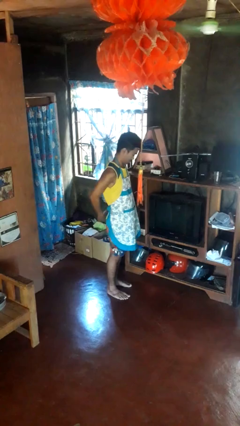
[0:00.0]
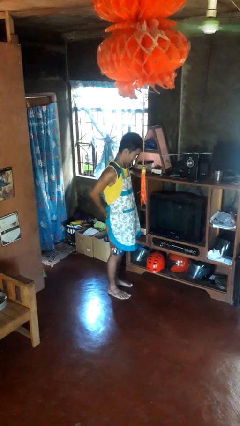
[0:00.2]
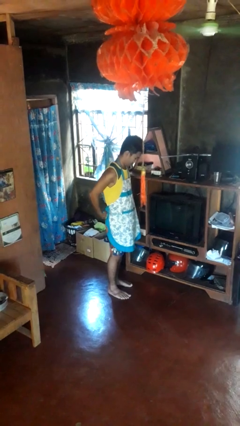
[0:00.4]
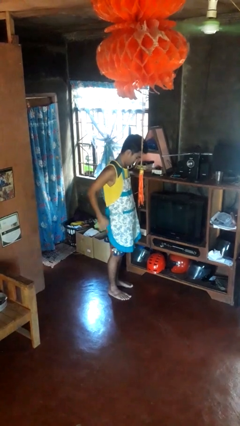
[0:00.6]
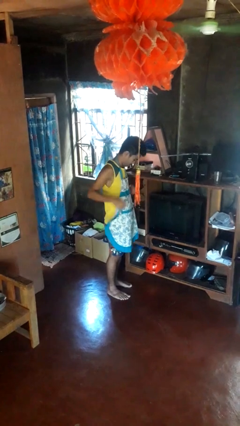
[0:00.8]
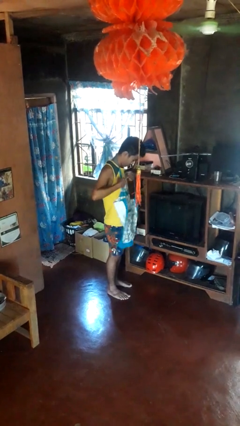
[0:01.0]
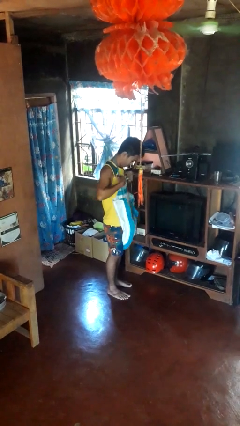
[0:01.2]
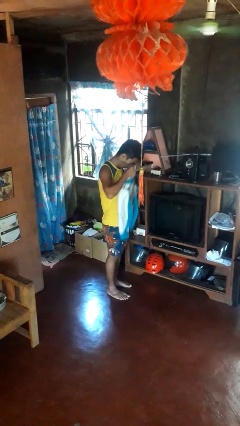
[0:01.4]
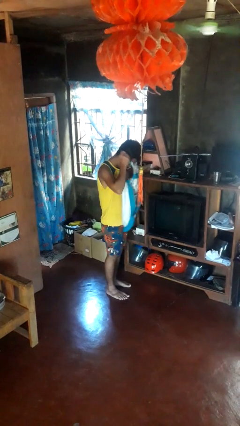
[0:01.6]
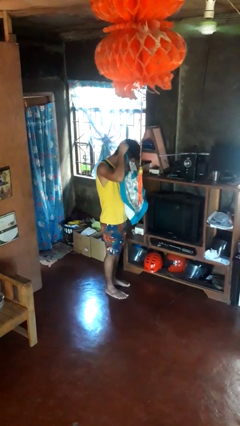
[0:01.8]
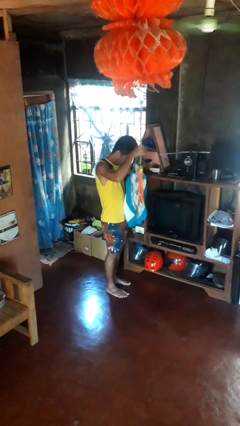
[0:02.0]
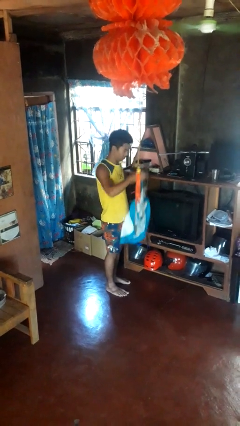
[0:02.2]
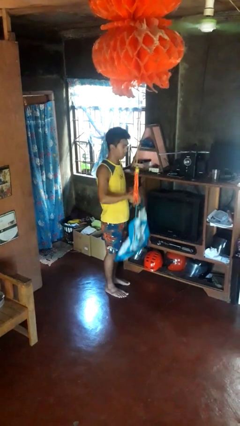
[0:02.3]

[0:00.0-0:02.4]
person takes off apron

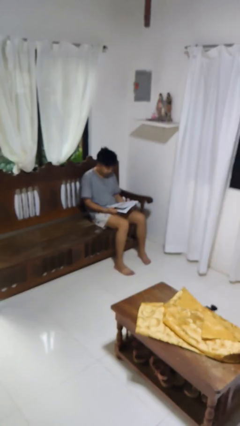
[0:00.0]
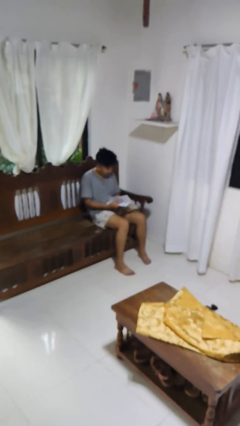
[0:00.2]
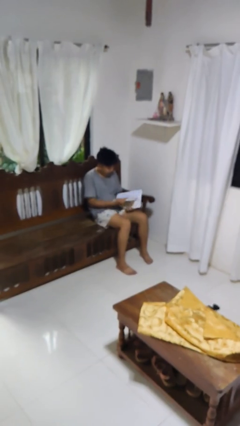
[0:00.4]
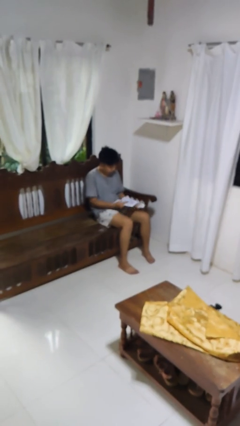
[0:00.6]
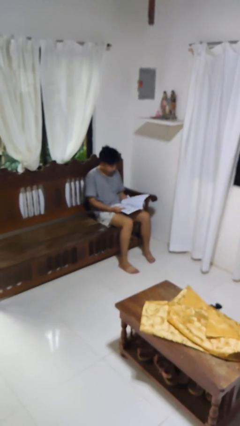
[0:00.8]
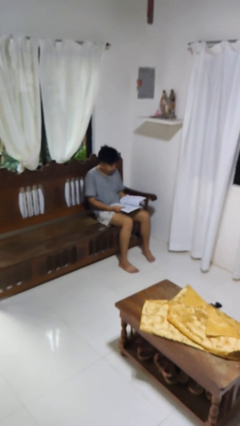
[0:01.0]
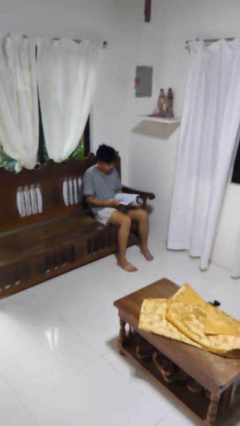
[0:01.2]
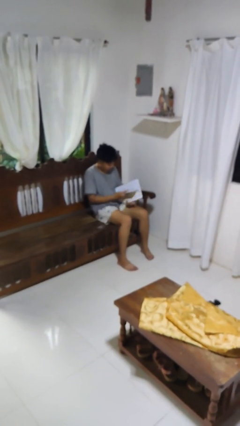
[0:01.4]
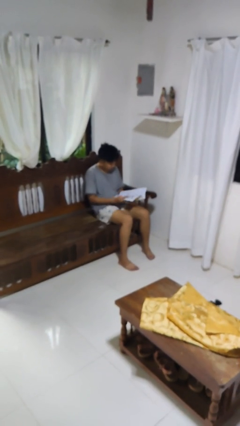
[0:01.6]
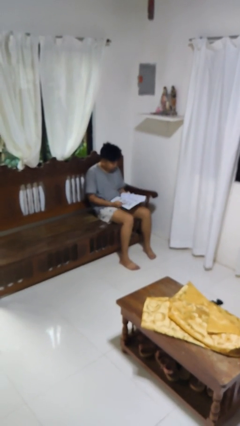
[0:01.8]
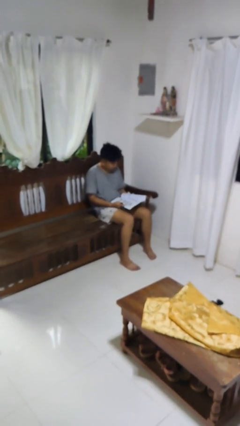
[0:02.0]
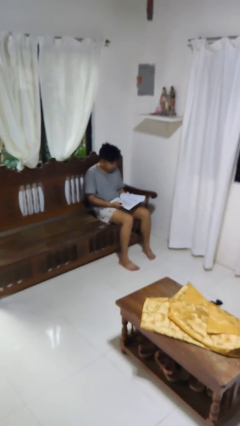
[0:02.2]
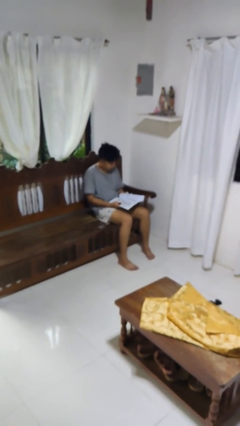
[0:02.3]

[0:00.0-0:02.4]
person reads newspaper

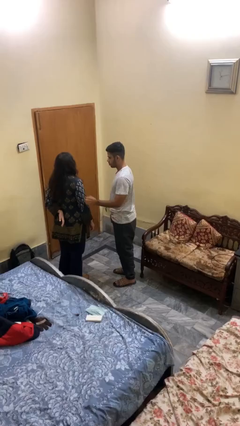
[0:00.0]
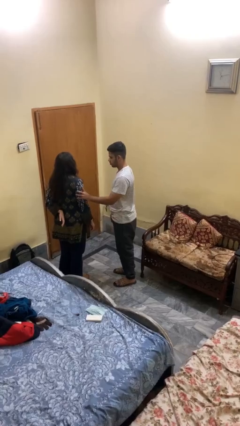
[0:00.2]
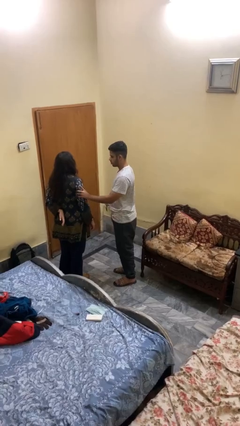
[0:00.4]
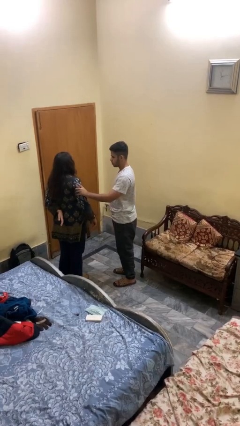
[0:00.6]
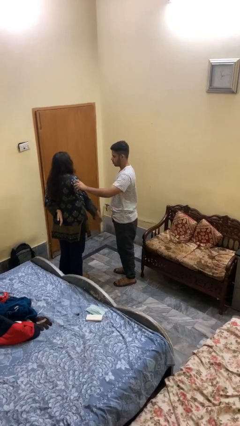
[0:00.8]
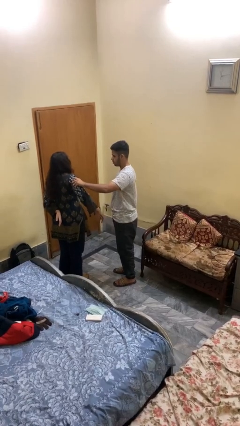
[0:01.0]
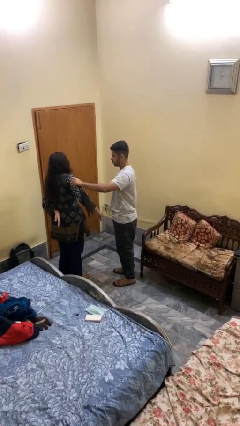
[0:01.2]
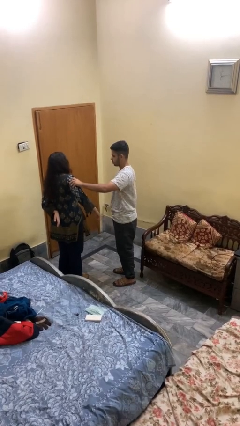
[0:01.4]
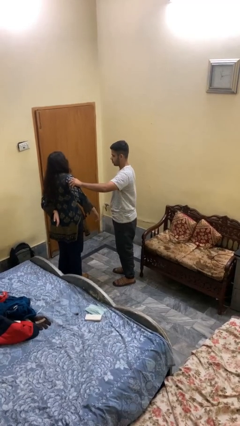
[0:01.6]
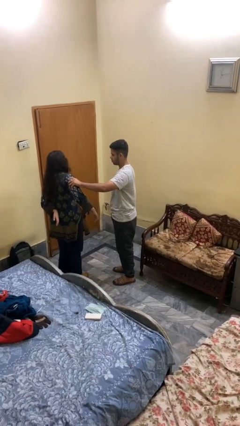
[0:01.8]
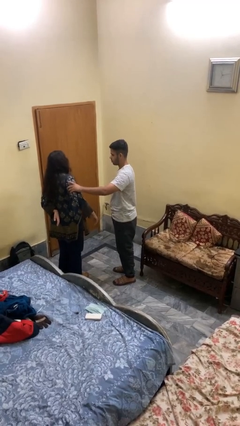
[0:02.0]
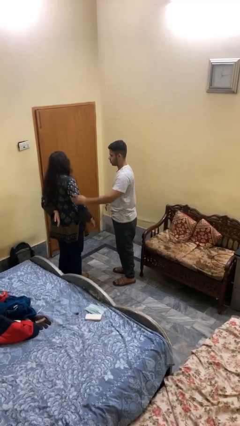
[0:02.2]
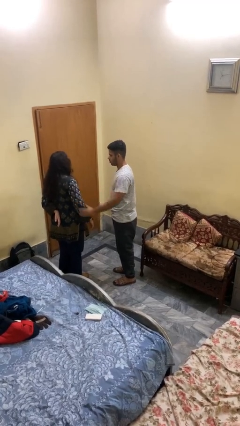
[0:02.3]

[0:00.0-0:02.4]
person grabs person by bicep

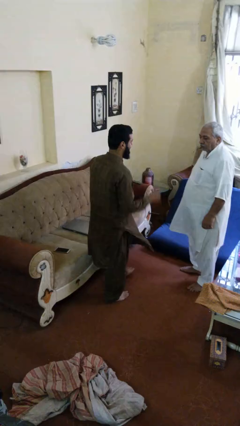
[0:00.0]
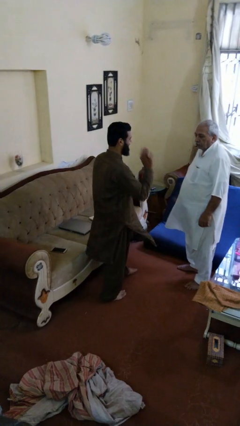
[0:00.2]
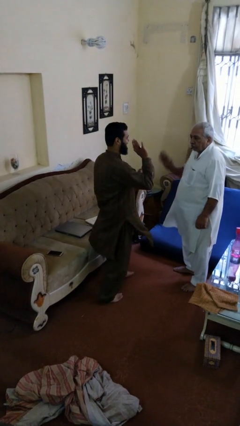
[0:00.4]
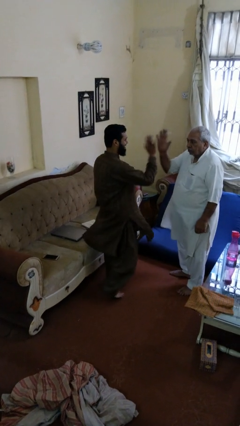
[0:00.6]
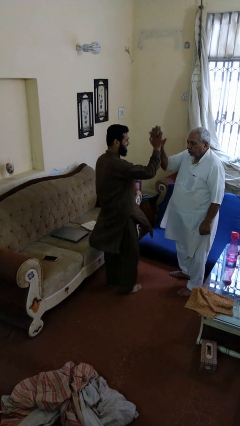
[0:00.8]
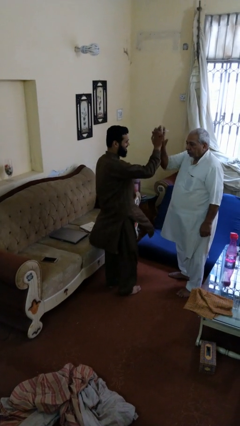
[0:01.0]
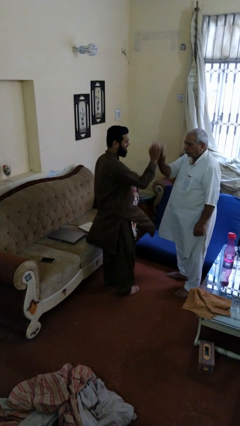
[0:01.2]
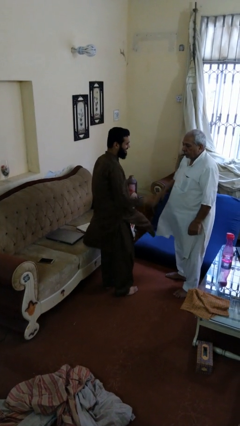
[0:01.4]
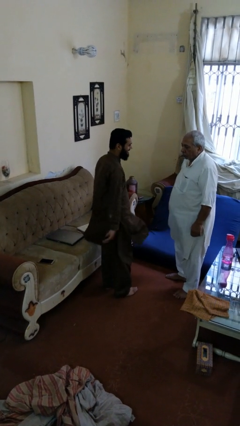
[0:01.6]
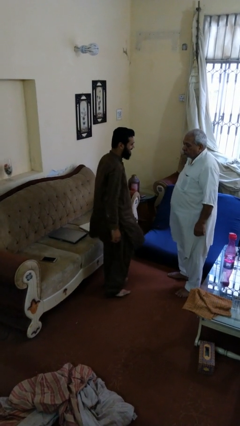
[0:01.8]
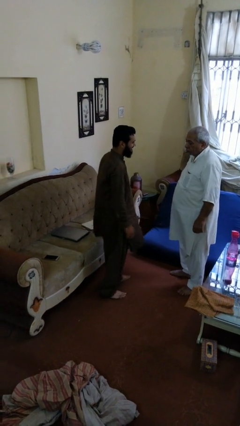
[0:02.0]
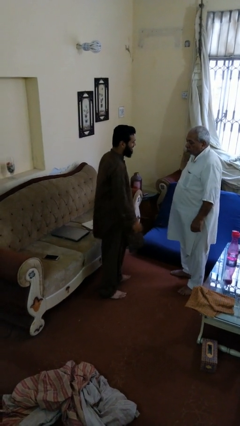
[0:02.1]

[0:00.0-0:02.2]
person highfives hand

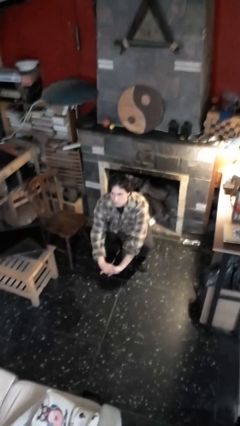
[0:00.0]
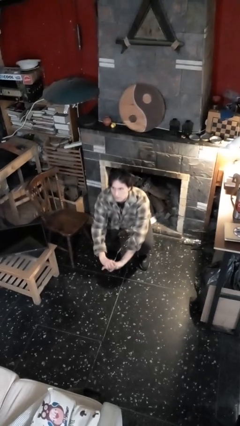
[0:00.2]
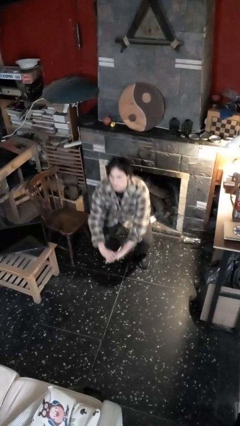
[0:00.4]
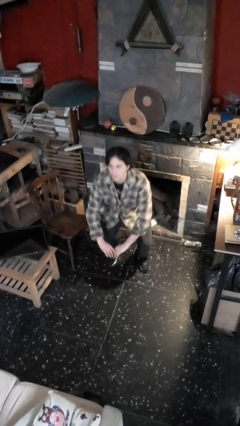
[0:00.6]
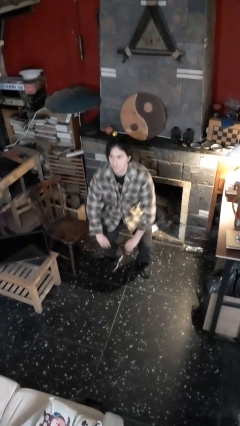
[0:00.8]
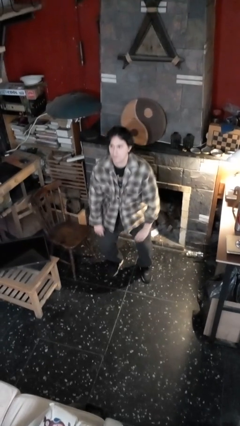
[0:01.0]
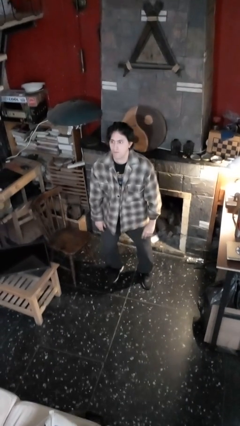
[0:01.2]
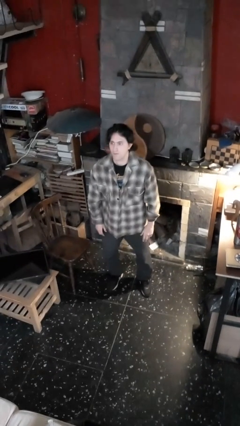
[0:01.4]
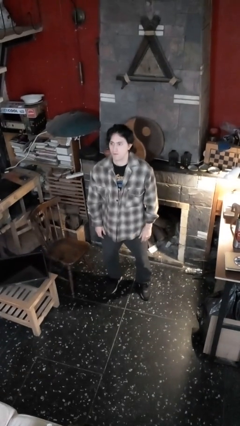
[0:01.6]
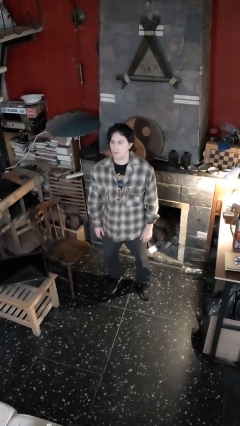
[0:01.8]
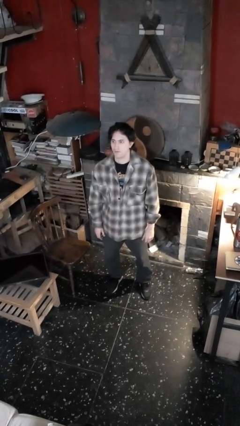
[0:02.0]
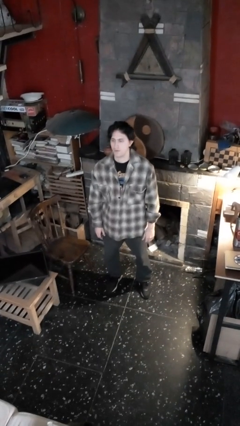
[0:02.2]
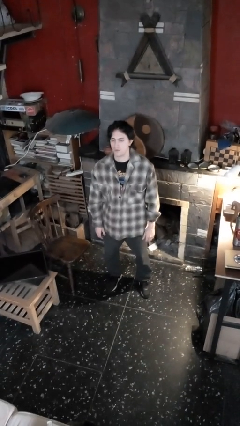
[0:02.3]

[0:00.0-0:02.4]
person stands up

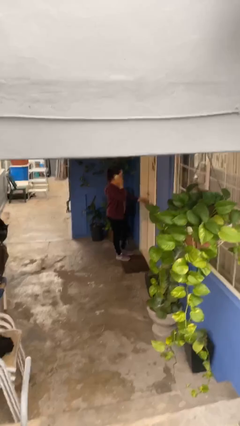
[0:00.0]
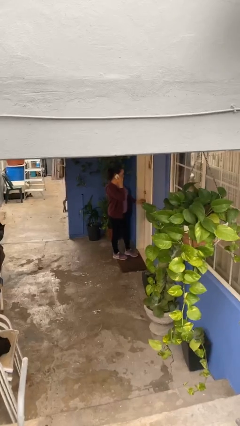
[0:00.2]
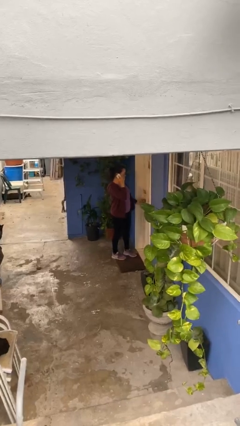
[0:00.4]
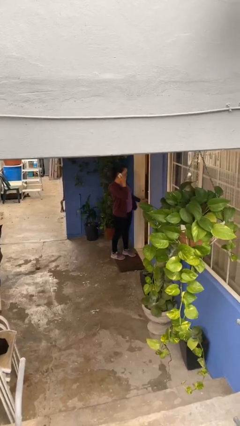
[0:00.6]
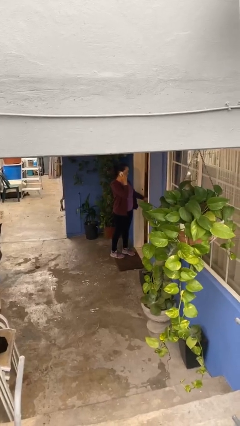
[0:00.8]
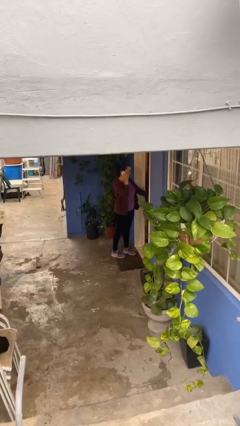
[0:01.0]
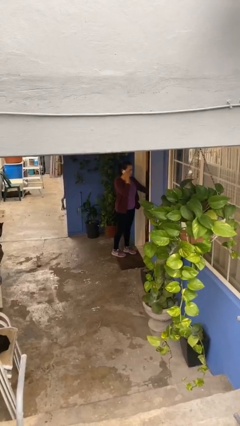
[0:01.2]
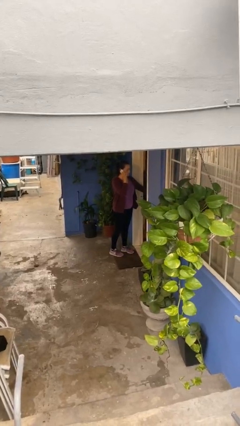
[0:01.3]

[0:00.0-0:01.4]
person opens facility door

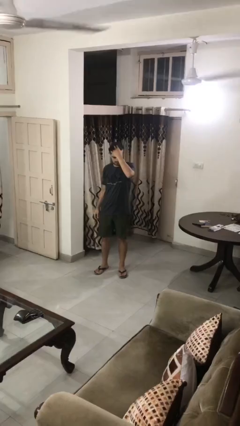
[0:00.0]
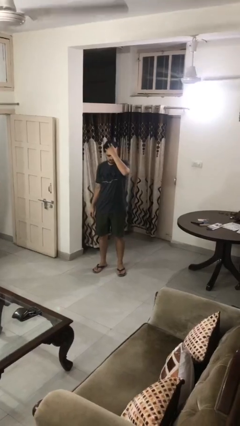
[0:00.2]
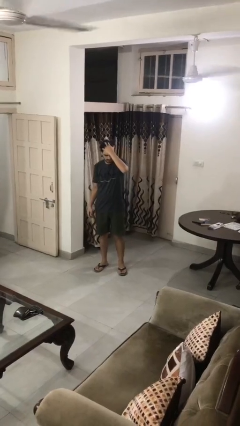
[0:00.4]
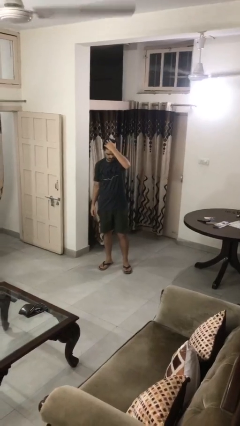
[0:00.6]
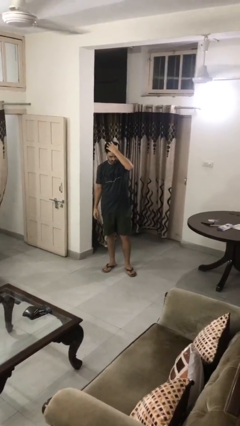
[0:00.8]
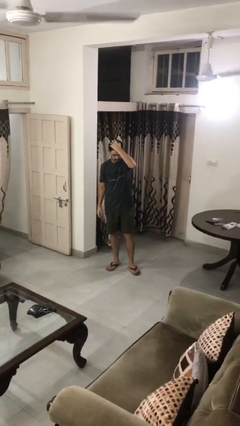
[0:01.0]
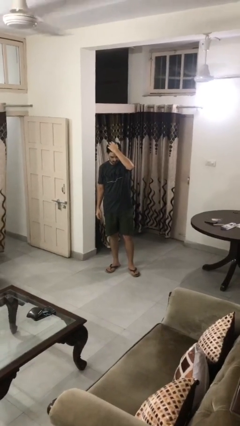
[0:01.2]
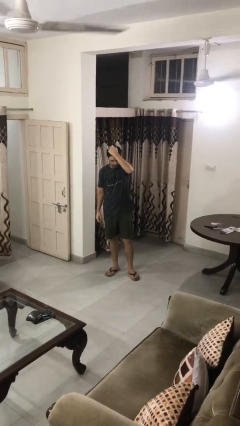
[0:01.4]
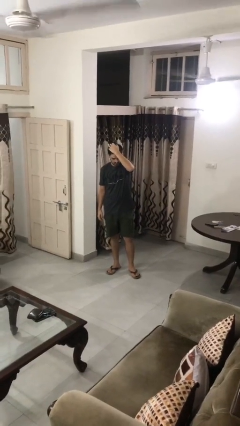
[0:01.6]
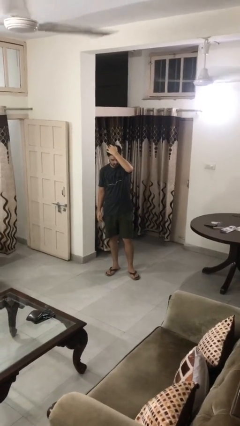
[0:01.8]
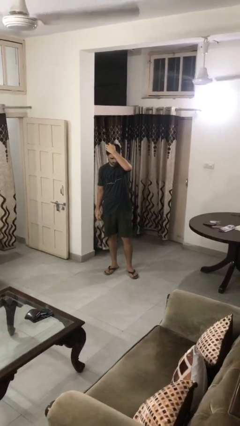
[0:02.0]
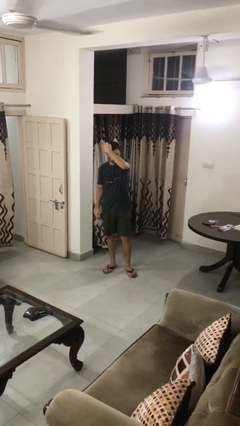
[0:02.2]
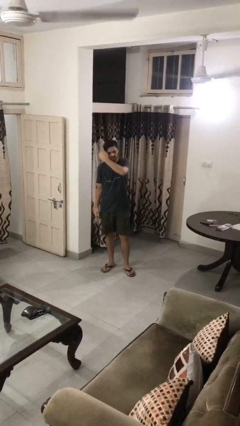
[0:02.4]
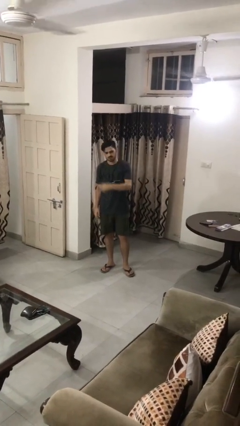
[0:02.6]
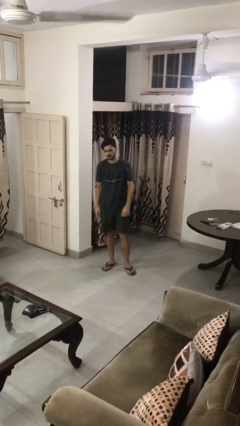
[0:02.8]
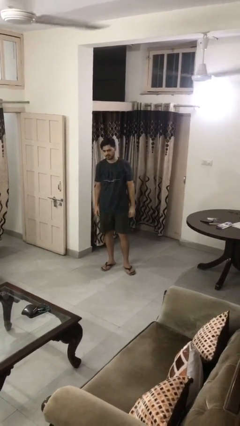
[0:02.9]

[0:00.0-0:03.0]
person scratches face

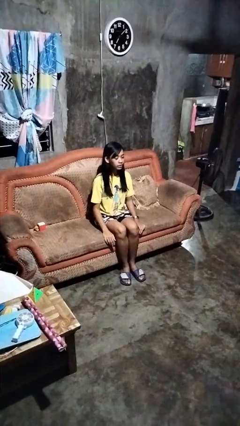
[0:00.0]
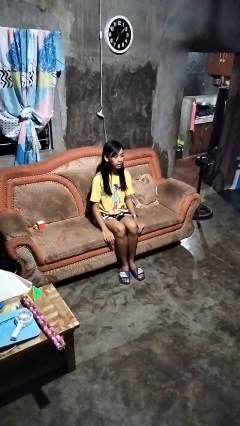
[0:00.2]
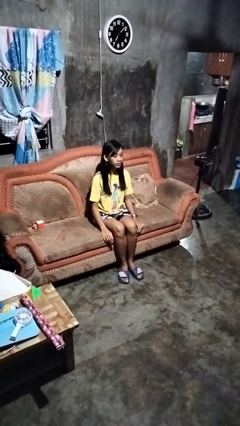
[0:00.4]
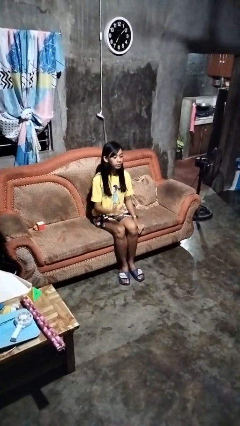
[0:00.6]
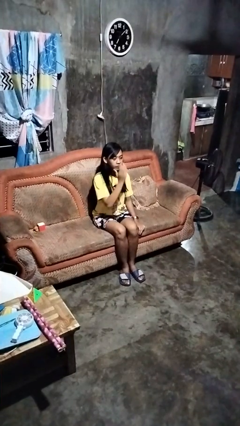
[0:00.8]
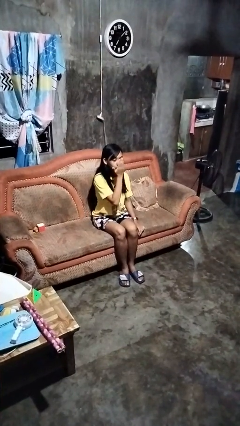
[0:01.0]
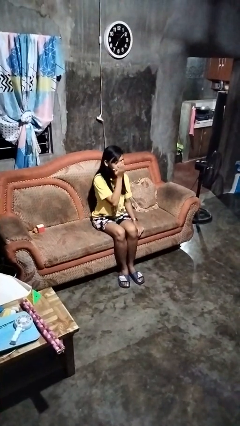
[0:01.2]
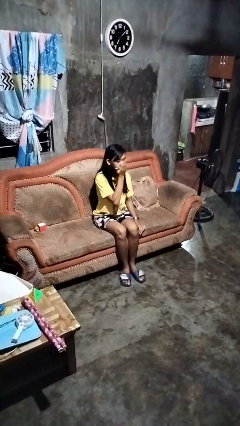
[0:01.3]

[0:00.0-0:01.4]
person gestures blow kiss
